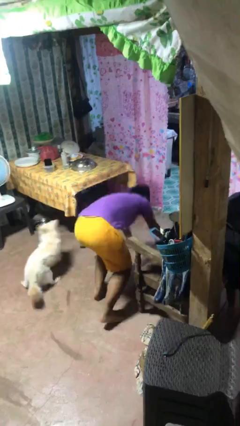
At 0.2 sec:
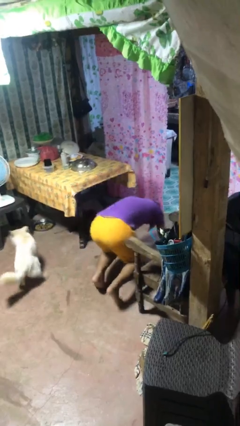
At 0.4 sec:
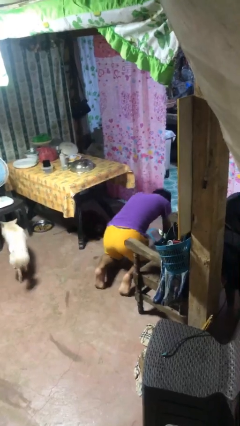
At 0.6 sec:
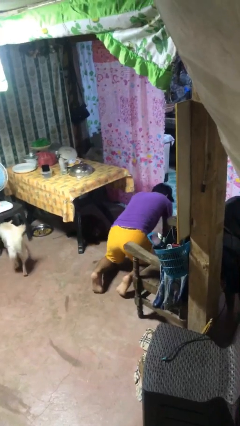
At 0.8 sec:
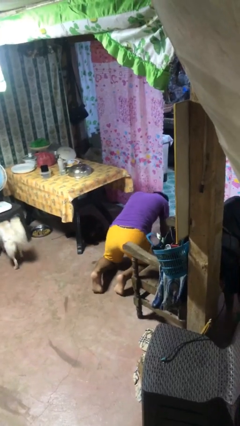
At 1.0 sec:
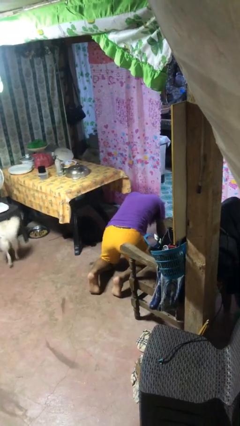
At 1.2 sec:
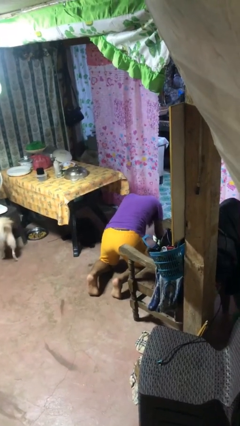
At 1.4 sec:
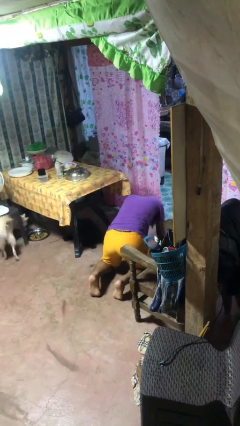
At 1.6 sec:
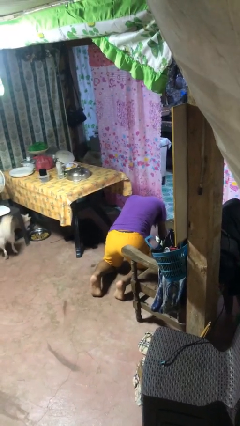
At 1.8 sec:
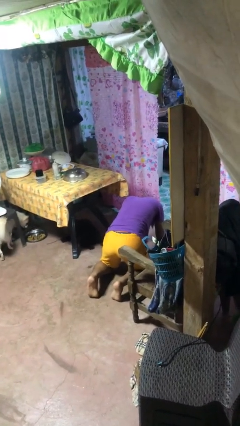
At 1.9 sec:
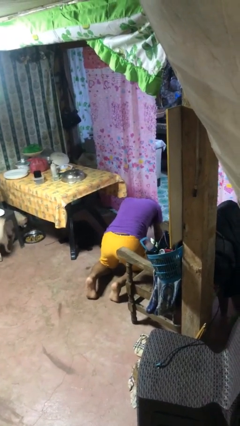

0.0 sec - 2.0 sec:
person lies down on floor

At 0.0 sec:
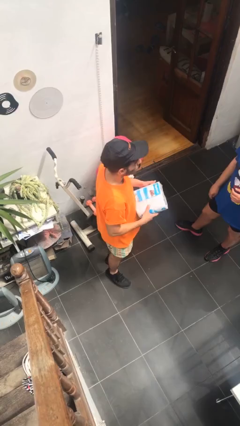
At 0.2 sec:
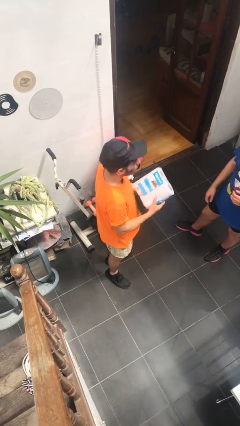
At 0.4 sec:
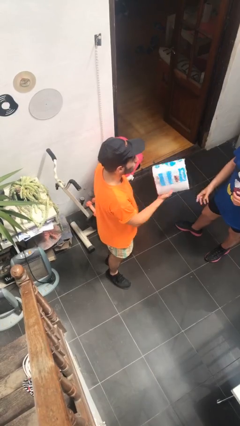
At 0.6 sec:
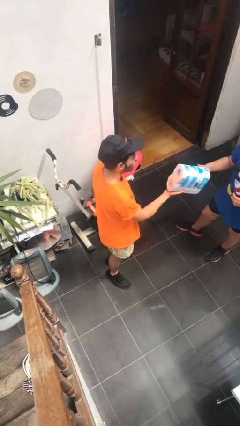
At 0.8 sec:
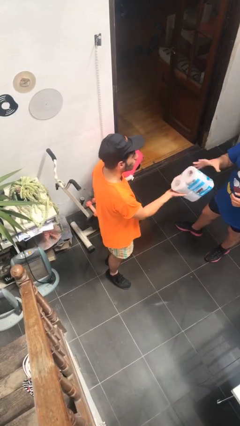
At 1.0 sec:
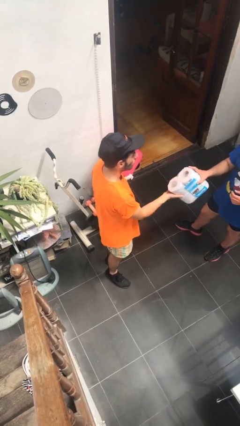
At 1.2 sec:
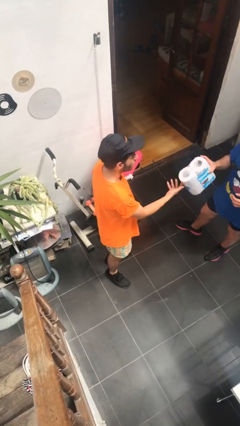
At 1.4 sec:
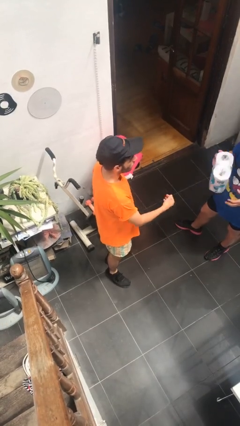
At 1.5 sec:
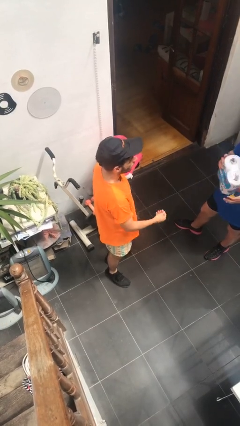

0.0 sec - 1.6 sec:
person transfers object to person

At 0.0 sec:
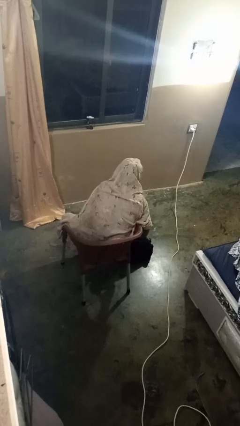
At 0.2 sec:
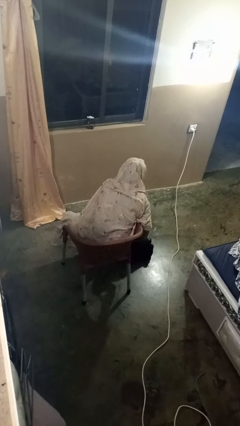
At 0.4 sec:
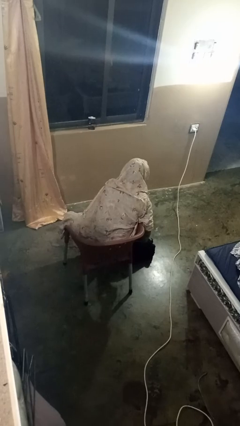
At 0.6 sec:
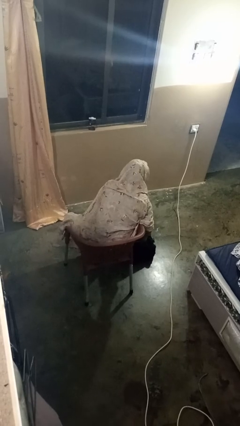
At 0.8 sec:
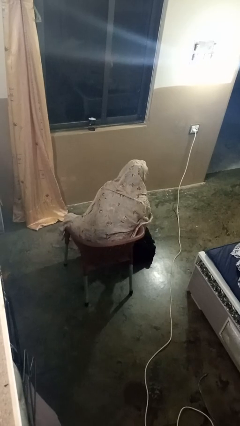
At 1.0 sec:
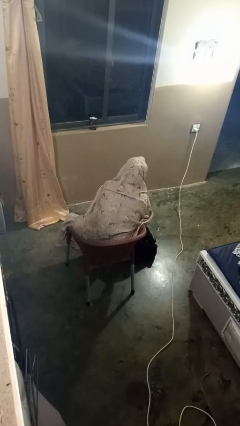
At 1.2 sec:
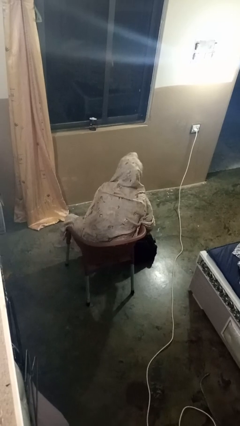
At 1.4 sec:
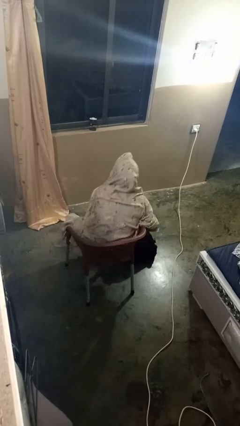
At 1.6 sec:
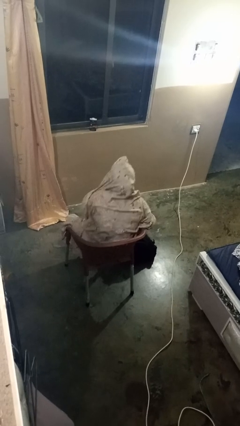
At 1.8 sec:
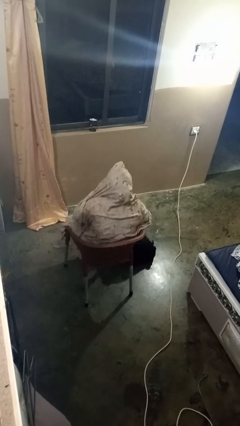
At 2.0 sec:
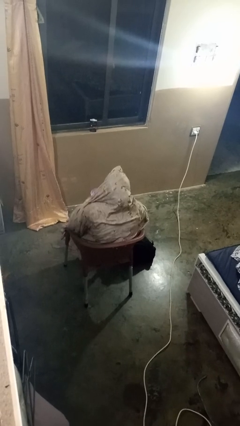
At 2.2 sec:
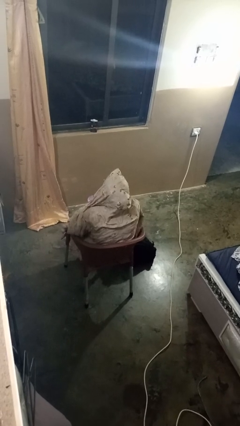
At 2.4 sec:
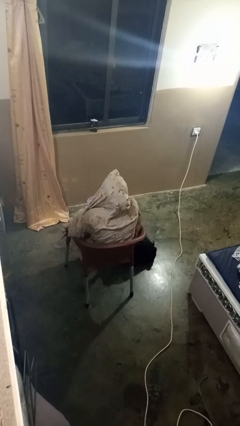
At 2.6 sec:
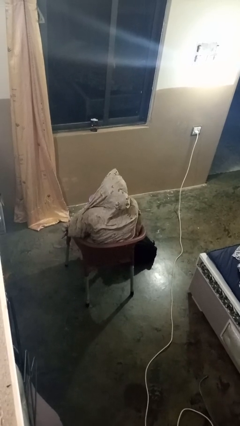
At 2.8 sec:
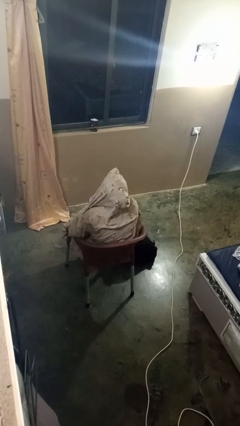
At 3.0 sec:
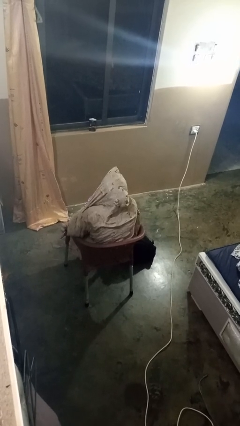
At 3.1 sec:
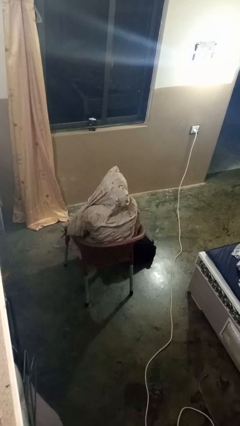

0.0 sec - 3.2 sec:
person eats snack from bag

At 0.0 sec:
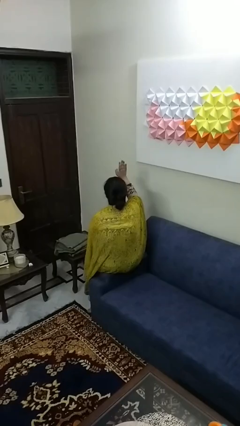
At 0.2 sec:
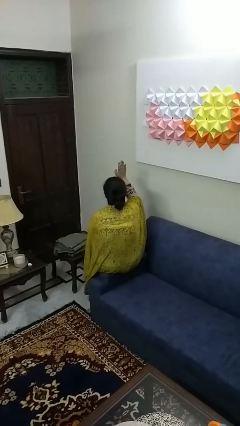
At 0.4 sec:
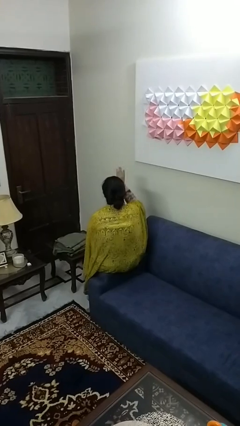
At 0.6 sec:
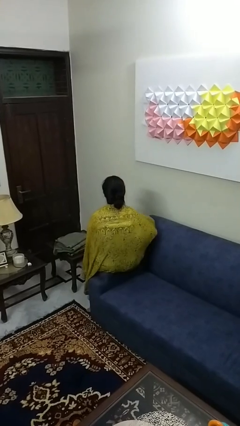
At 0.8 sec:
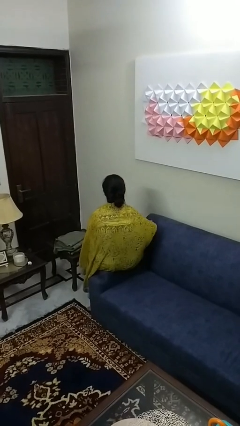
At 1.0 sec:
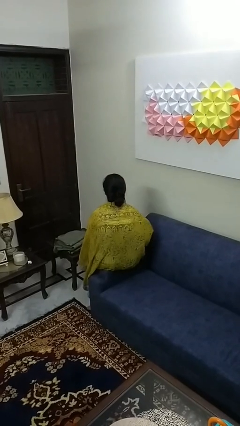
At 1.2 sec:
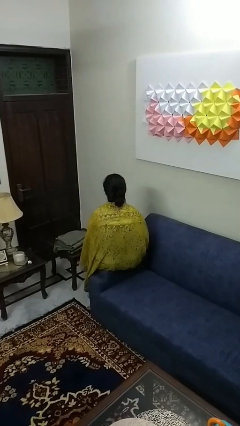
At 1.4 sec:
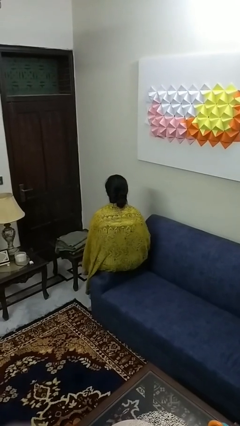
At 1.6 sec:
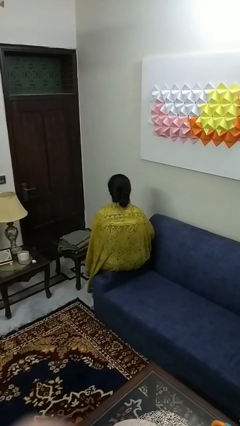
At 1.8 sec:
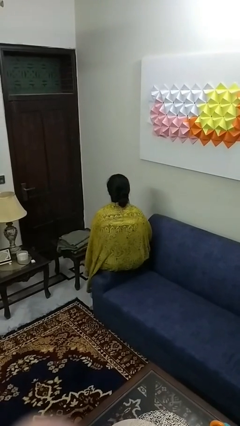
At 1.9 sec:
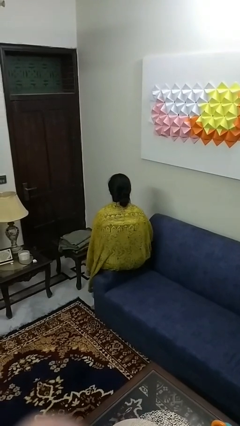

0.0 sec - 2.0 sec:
person gestures lower hand

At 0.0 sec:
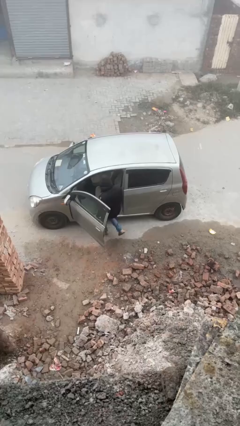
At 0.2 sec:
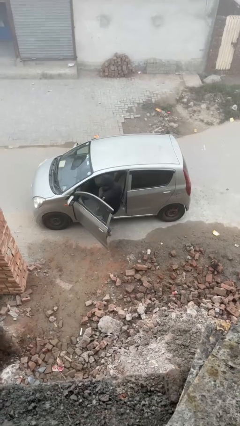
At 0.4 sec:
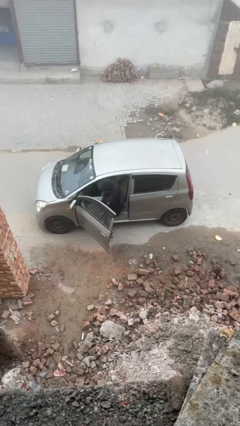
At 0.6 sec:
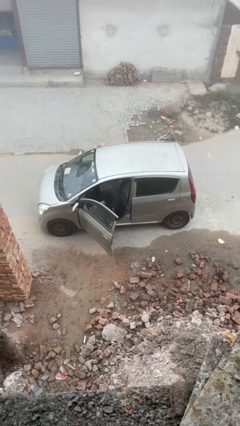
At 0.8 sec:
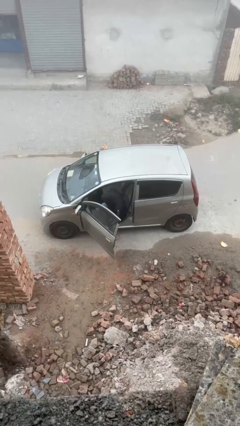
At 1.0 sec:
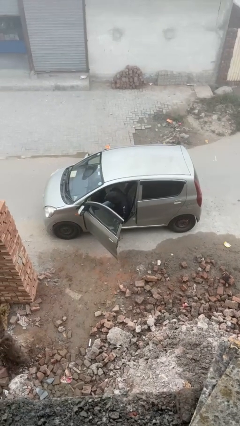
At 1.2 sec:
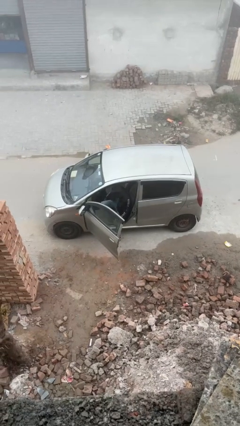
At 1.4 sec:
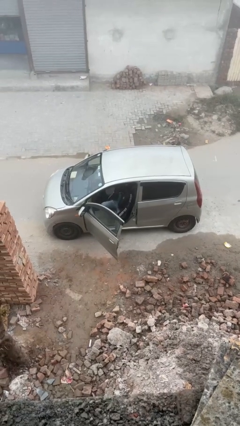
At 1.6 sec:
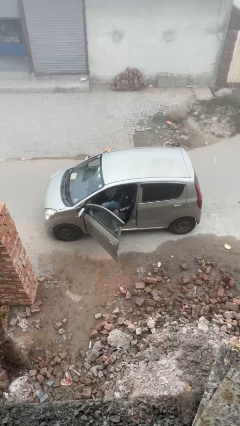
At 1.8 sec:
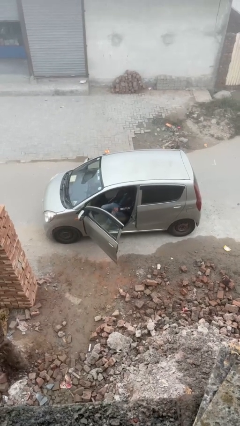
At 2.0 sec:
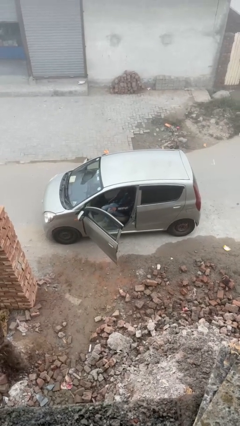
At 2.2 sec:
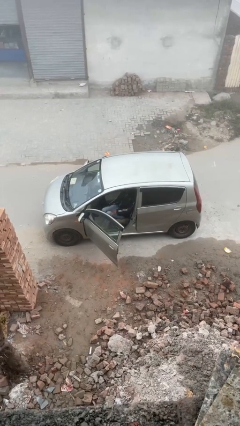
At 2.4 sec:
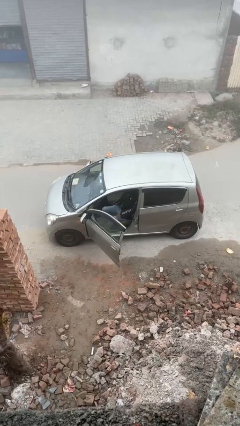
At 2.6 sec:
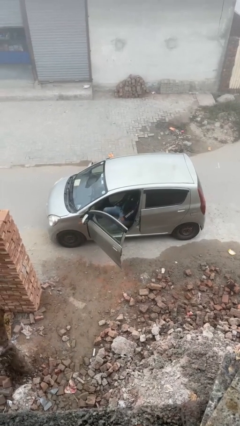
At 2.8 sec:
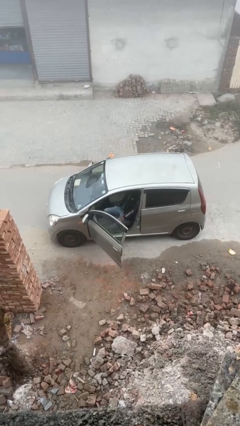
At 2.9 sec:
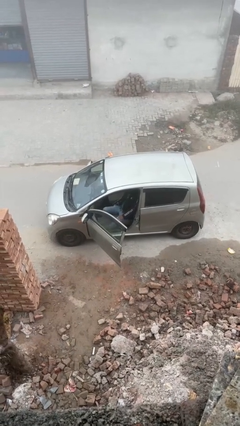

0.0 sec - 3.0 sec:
person enters car

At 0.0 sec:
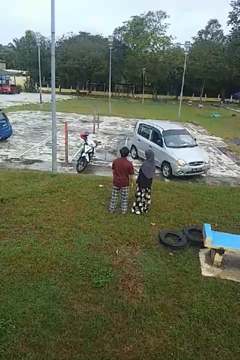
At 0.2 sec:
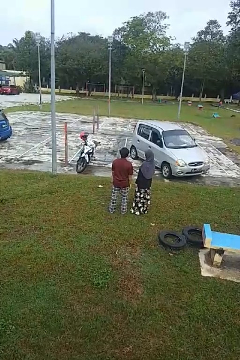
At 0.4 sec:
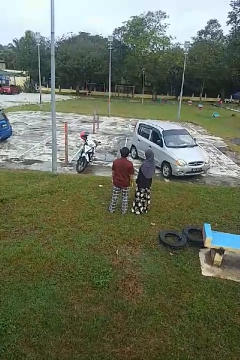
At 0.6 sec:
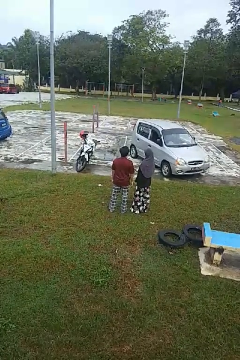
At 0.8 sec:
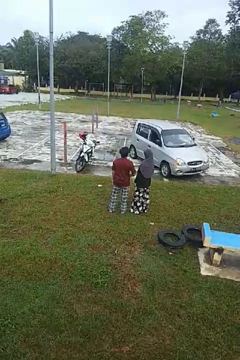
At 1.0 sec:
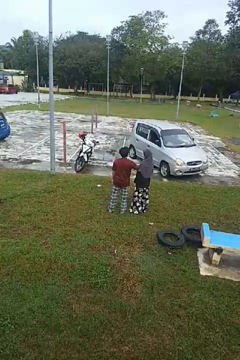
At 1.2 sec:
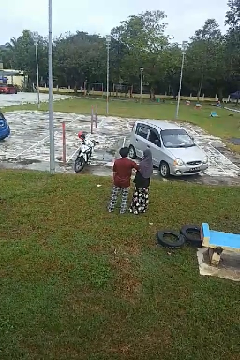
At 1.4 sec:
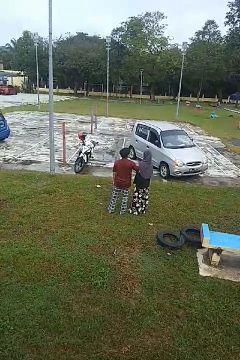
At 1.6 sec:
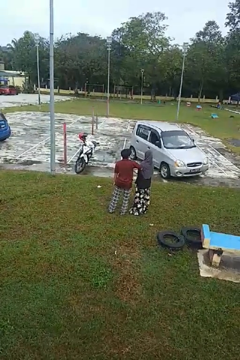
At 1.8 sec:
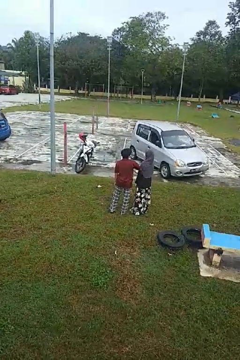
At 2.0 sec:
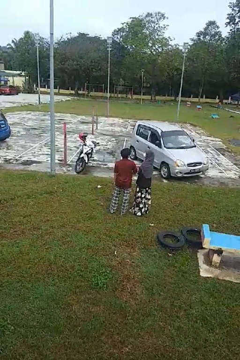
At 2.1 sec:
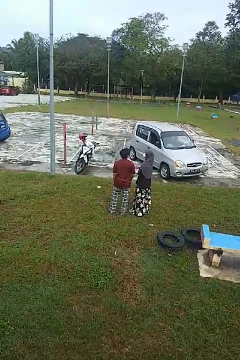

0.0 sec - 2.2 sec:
person nudges person with elbow

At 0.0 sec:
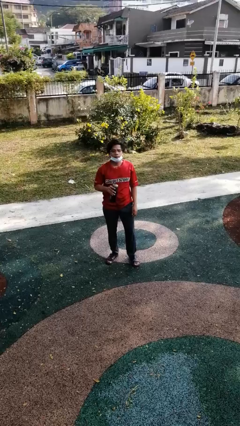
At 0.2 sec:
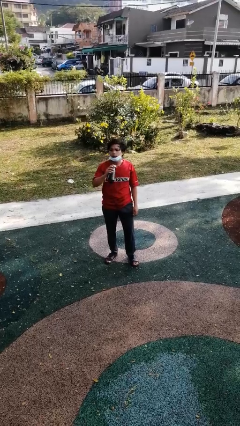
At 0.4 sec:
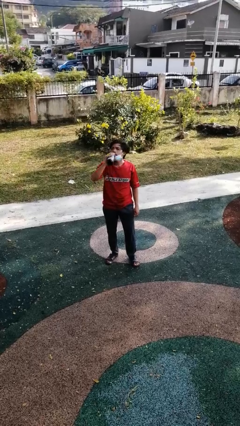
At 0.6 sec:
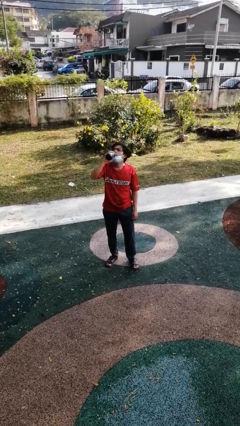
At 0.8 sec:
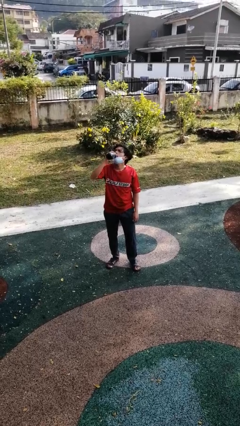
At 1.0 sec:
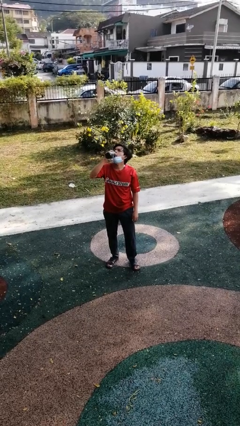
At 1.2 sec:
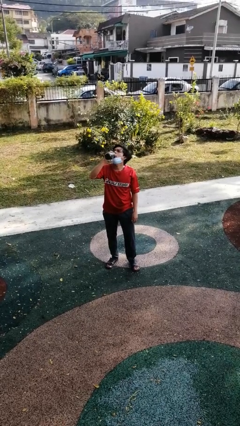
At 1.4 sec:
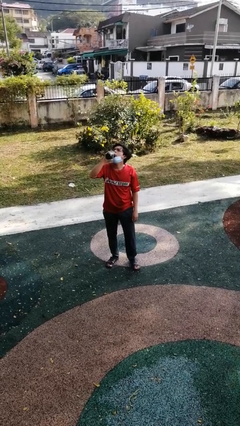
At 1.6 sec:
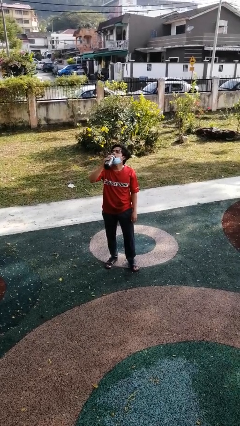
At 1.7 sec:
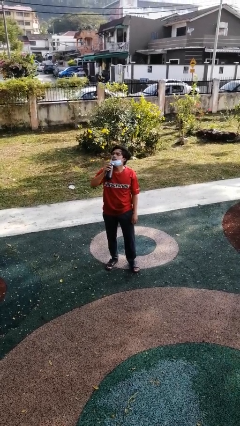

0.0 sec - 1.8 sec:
person drinks from bottle

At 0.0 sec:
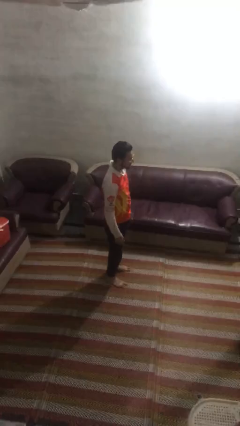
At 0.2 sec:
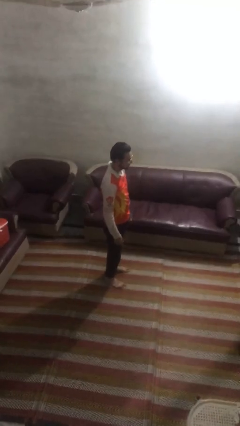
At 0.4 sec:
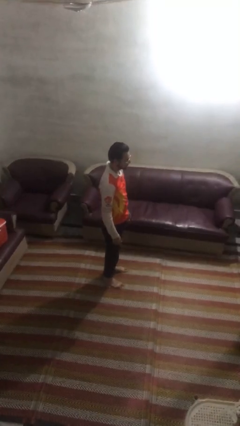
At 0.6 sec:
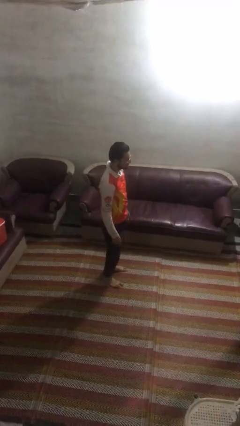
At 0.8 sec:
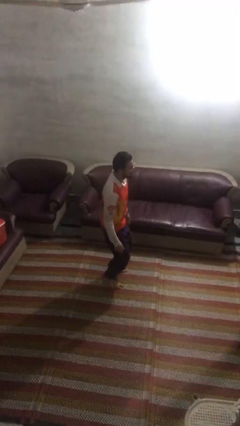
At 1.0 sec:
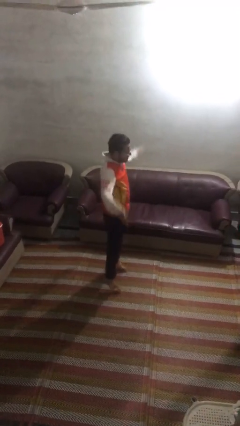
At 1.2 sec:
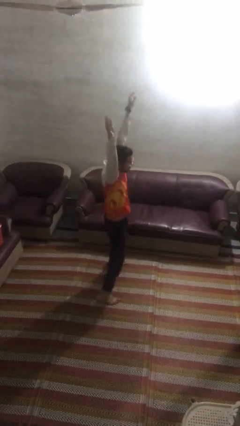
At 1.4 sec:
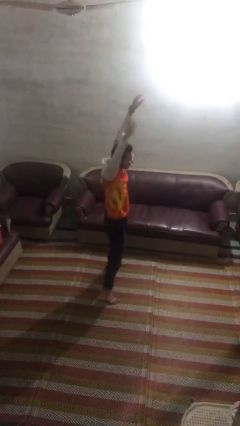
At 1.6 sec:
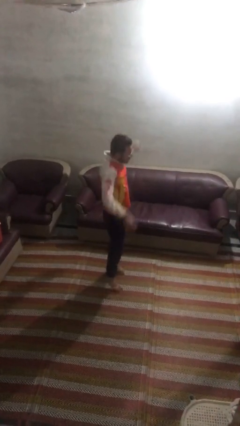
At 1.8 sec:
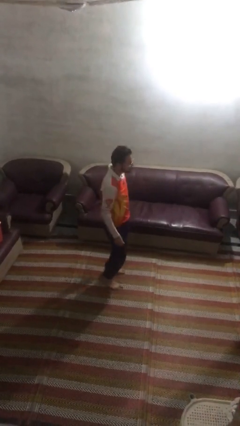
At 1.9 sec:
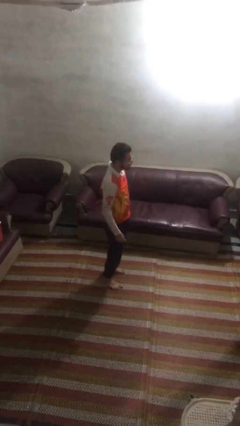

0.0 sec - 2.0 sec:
person exercises with jumping jacks
